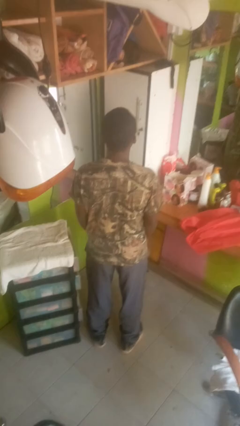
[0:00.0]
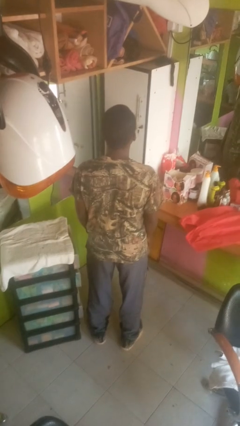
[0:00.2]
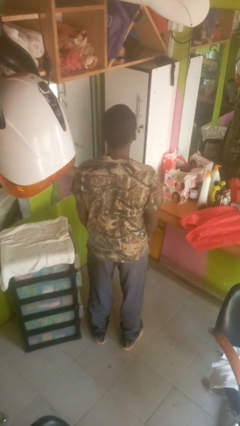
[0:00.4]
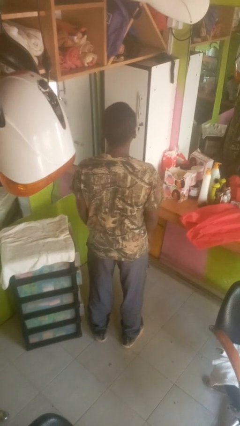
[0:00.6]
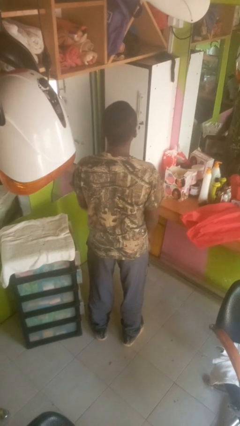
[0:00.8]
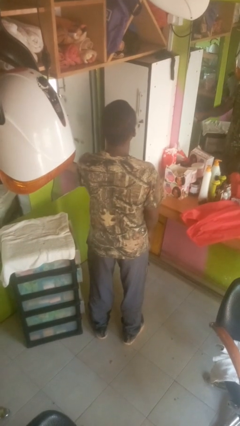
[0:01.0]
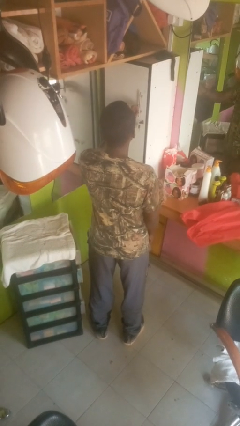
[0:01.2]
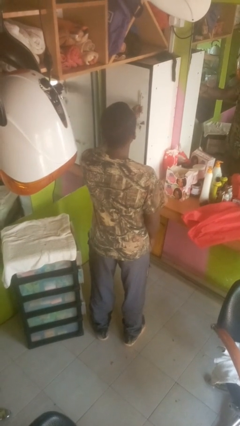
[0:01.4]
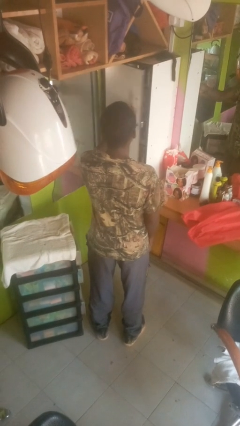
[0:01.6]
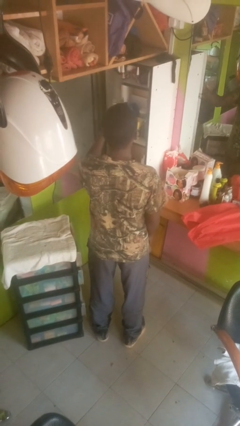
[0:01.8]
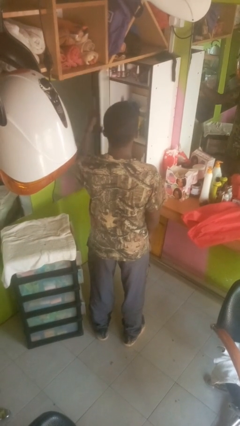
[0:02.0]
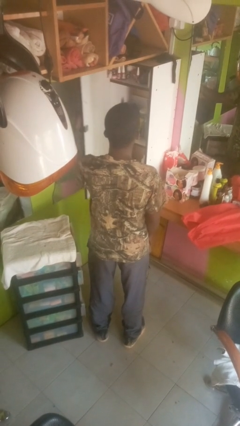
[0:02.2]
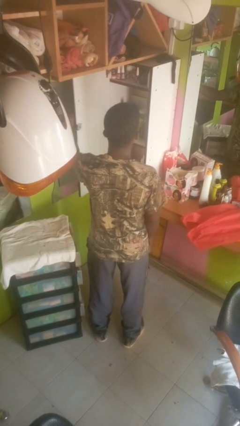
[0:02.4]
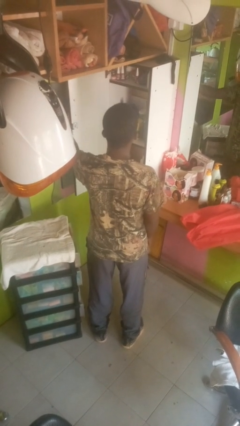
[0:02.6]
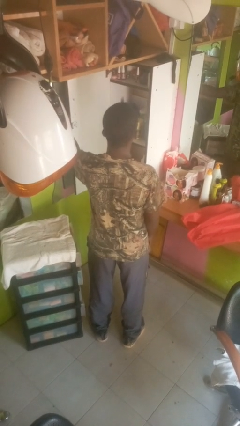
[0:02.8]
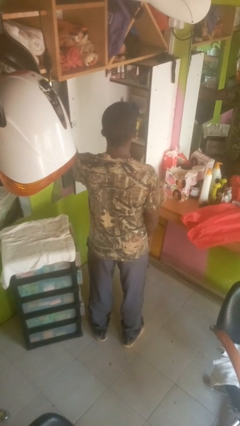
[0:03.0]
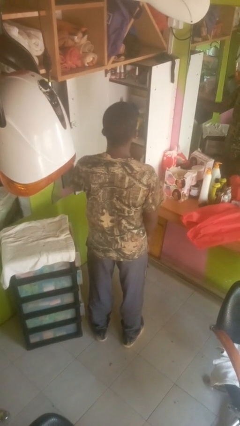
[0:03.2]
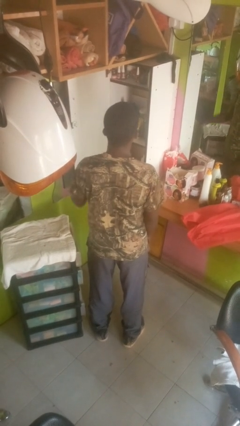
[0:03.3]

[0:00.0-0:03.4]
person opens closet door

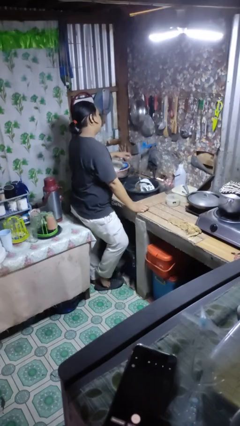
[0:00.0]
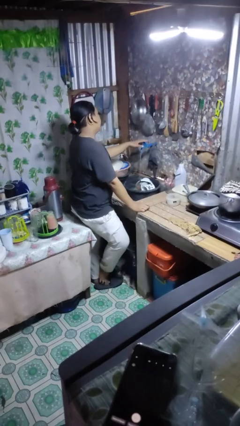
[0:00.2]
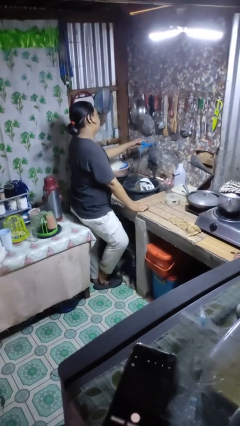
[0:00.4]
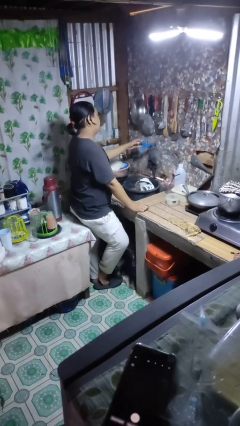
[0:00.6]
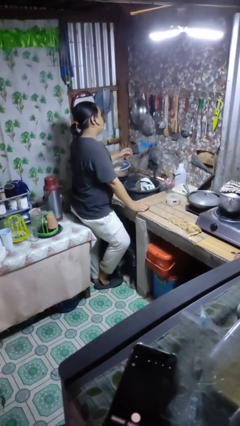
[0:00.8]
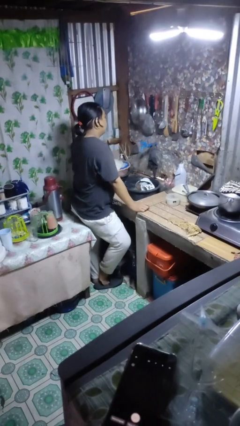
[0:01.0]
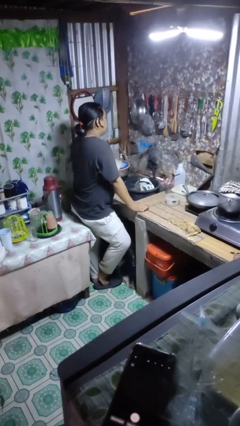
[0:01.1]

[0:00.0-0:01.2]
person turns off faucet

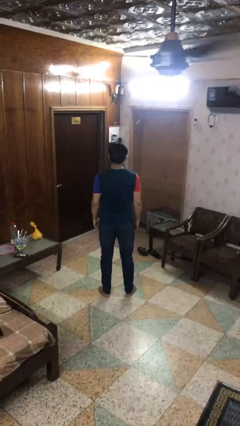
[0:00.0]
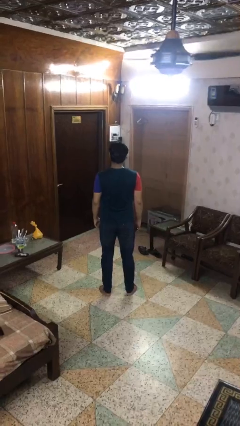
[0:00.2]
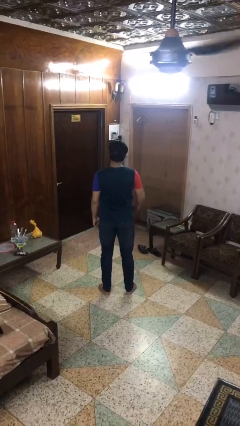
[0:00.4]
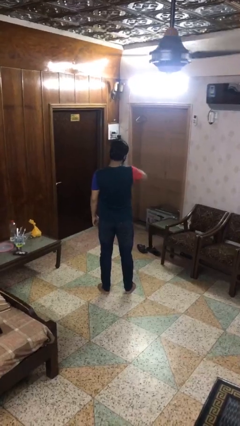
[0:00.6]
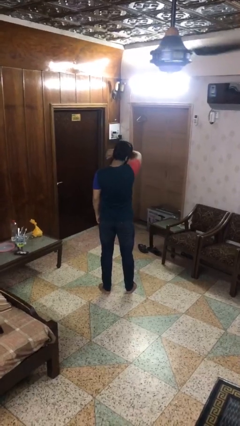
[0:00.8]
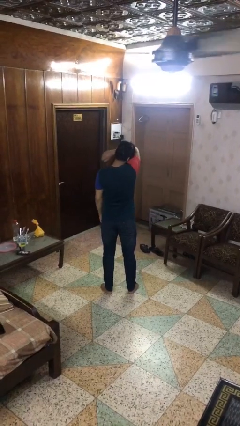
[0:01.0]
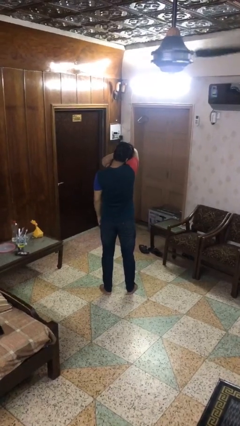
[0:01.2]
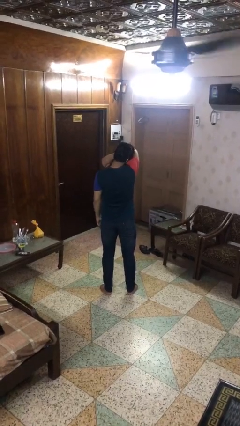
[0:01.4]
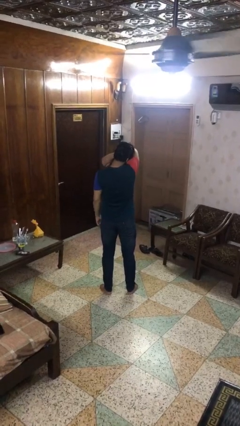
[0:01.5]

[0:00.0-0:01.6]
person sneezes into arm

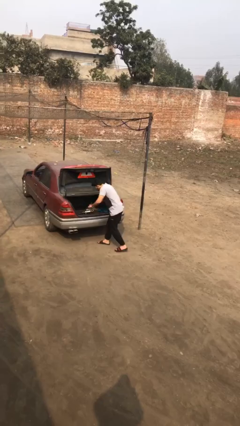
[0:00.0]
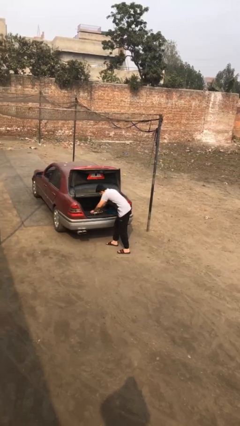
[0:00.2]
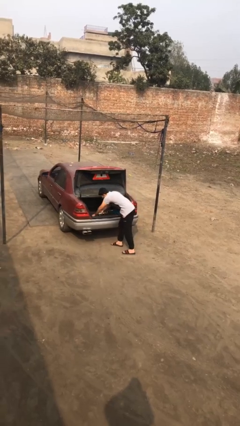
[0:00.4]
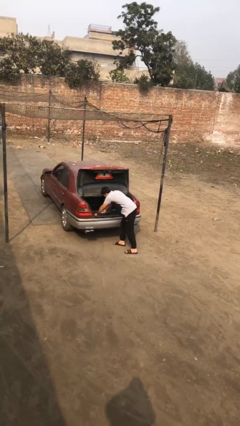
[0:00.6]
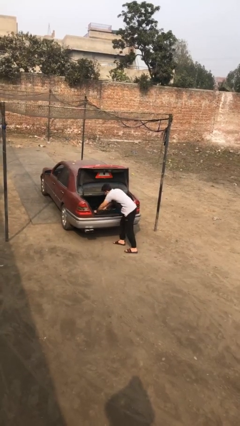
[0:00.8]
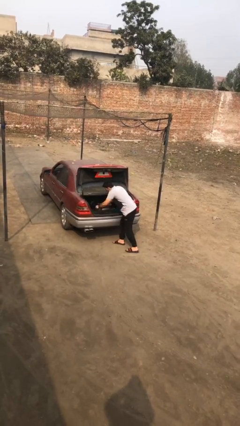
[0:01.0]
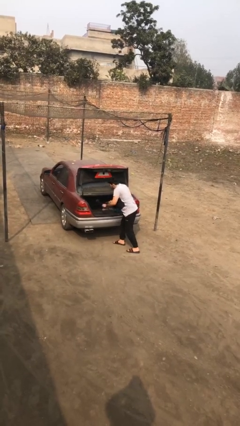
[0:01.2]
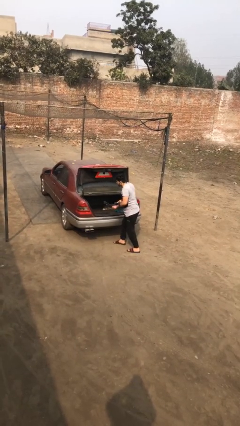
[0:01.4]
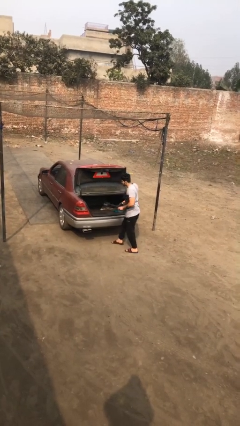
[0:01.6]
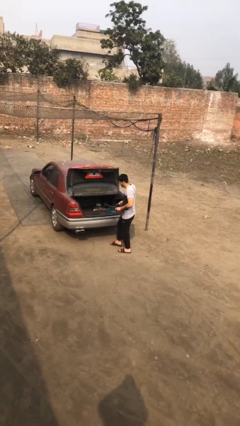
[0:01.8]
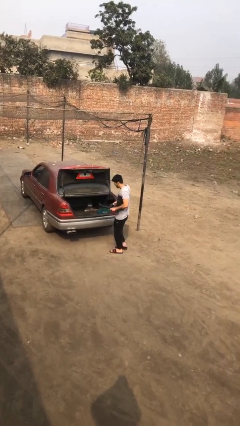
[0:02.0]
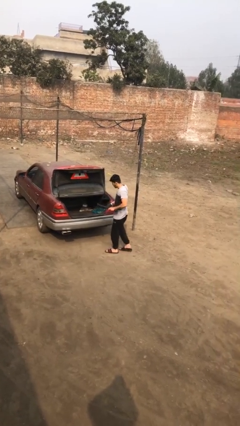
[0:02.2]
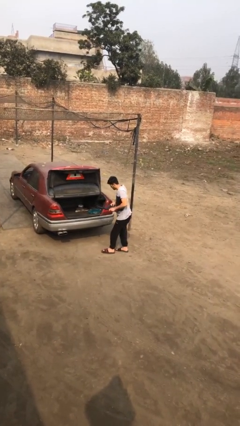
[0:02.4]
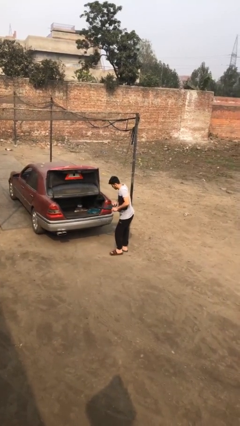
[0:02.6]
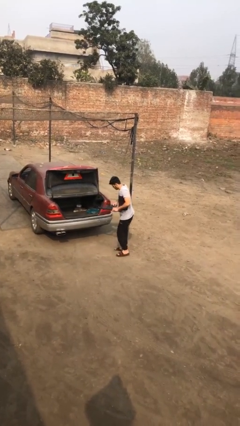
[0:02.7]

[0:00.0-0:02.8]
person unloads car

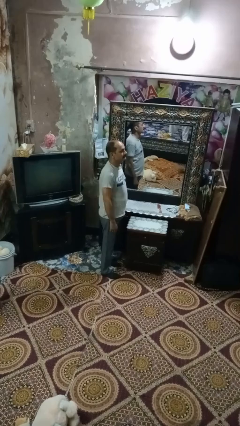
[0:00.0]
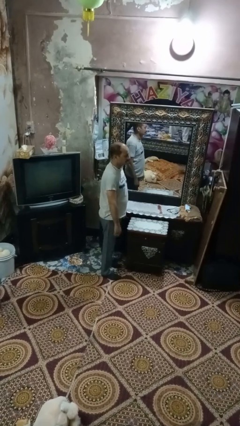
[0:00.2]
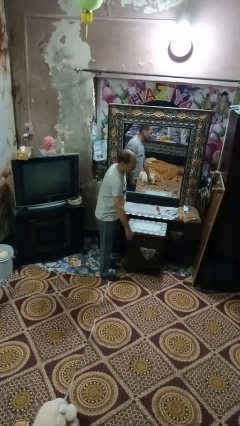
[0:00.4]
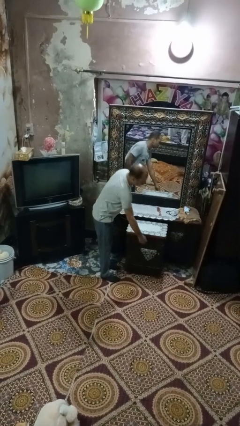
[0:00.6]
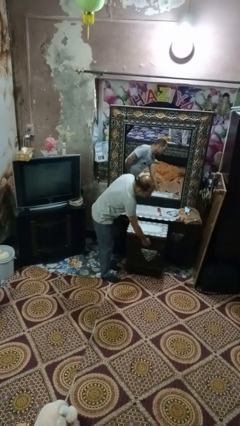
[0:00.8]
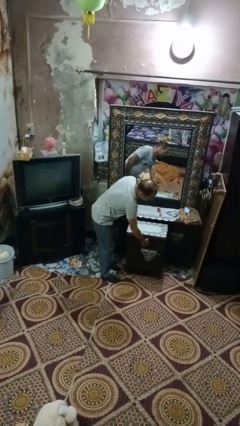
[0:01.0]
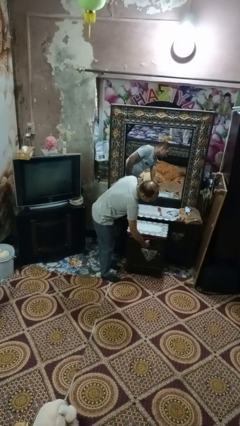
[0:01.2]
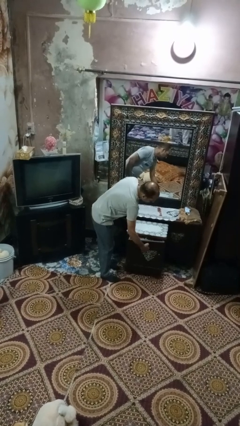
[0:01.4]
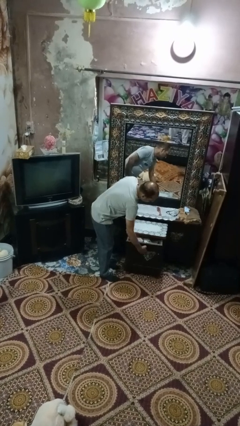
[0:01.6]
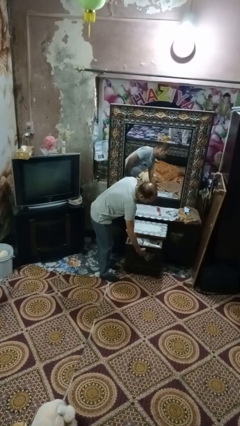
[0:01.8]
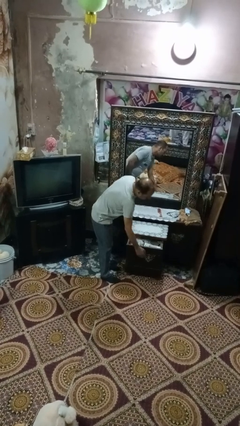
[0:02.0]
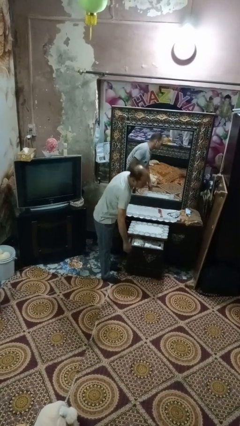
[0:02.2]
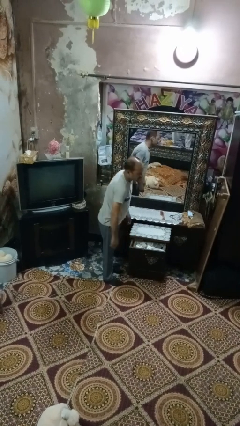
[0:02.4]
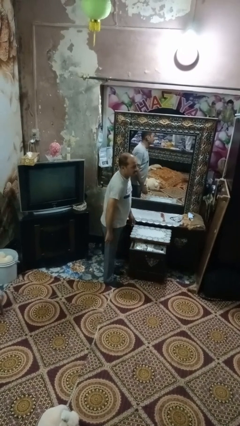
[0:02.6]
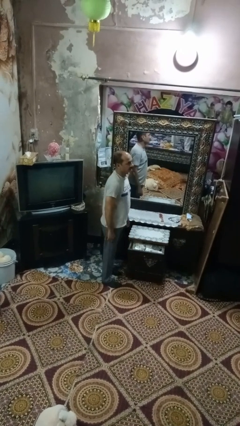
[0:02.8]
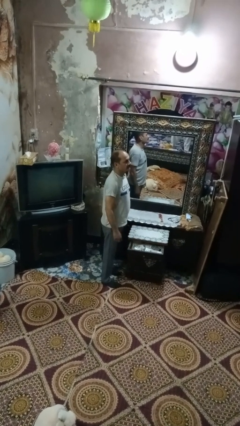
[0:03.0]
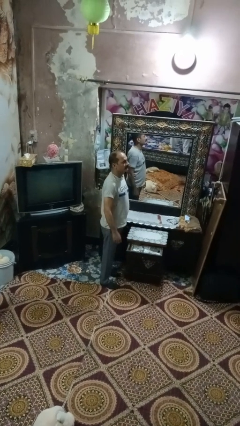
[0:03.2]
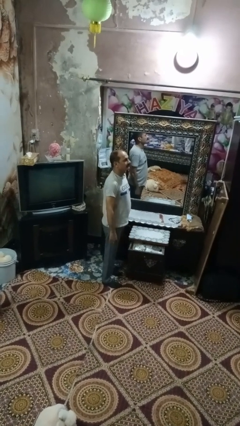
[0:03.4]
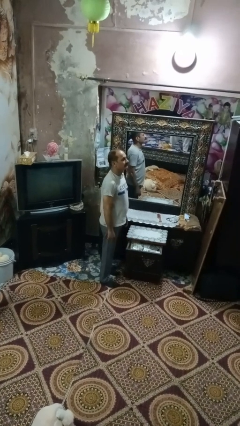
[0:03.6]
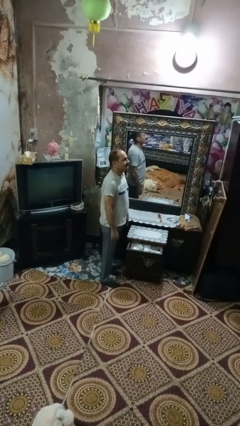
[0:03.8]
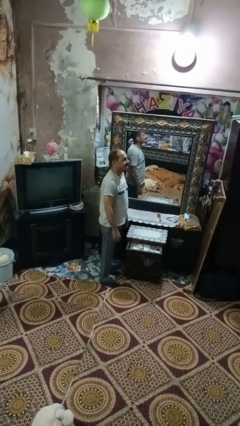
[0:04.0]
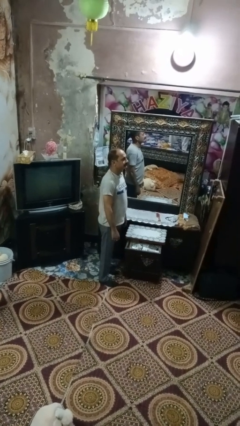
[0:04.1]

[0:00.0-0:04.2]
person opens dresser drawer

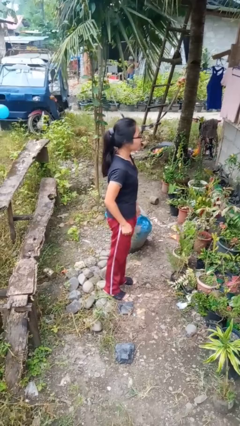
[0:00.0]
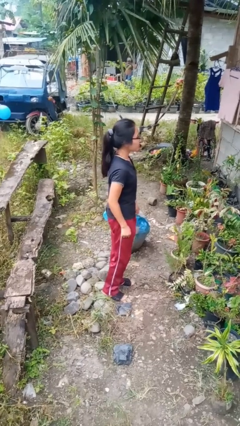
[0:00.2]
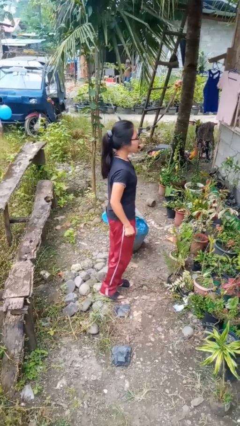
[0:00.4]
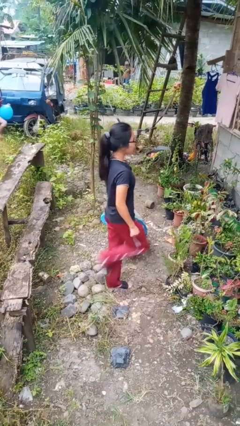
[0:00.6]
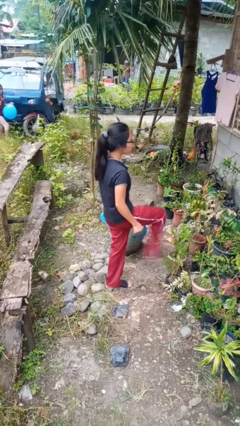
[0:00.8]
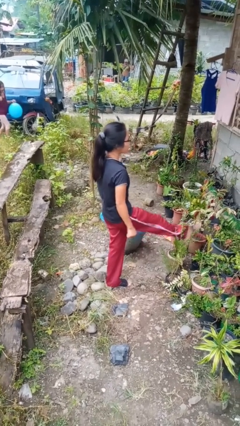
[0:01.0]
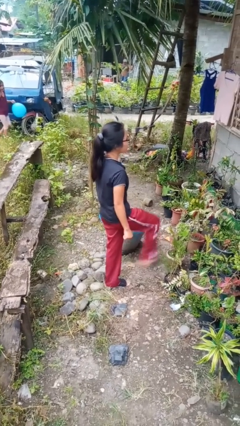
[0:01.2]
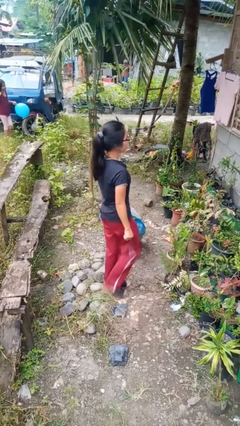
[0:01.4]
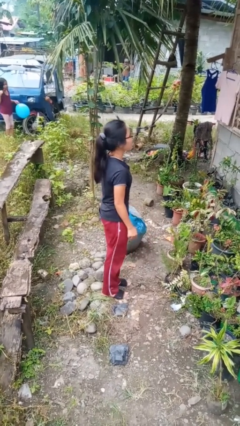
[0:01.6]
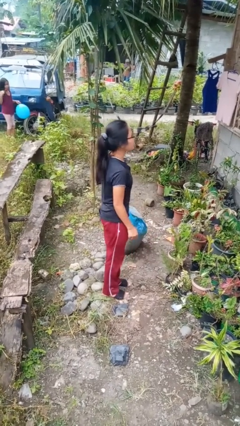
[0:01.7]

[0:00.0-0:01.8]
person karate kicks

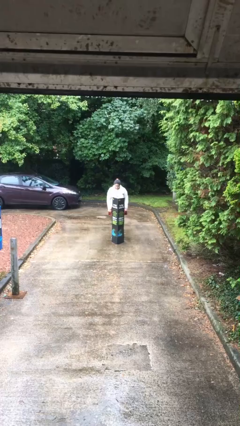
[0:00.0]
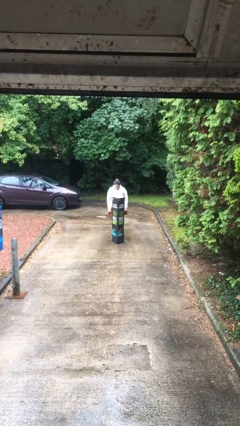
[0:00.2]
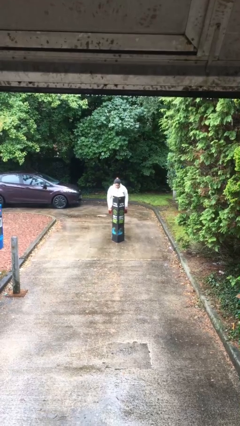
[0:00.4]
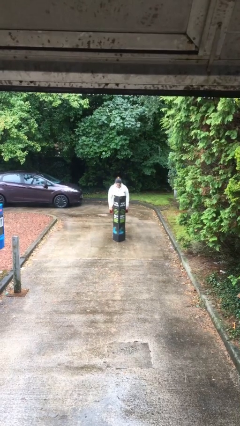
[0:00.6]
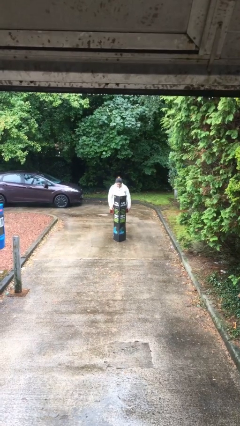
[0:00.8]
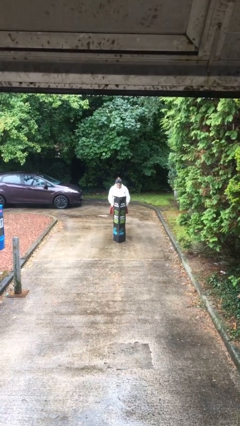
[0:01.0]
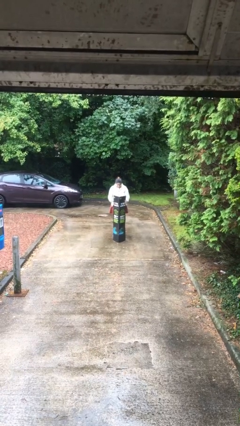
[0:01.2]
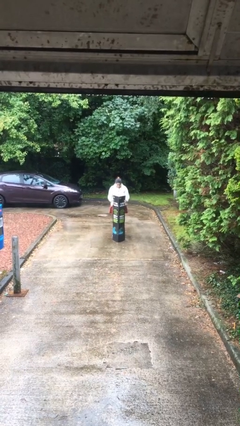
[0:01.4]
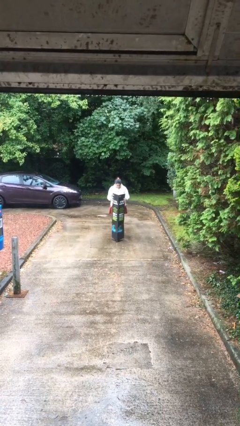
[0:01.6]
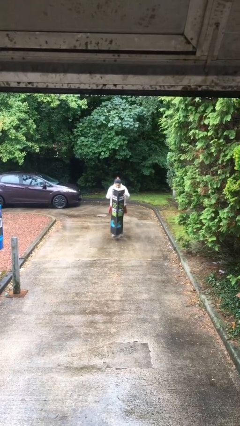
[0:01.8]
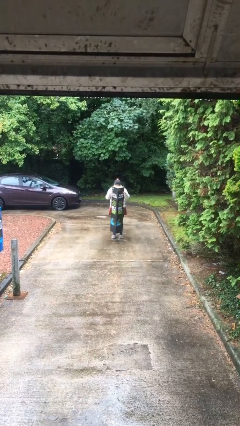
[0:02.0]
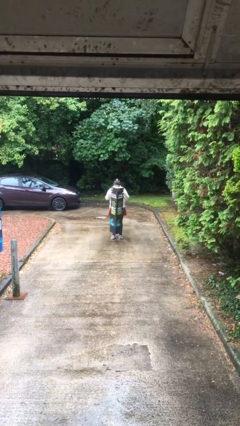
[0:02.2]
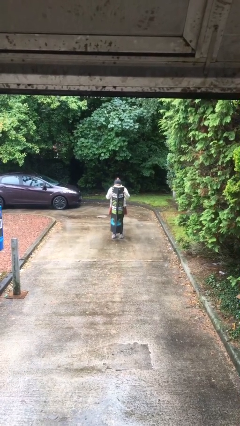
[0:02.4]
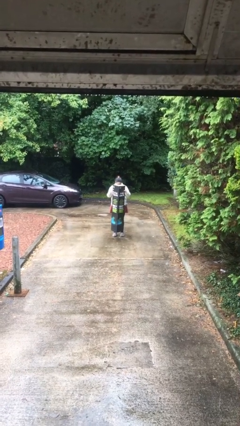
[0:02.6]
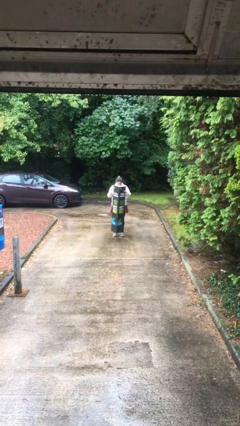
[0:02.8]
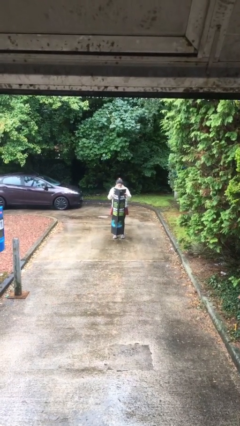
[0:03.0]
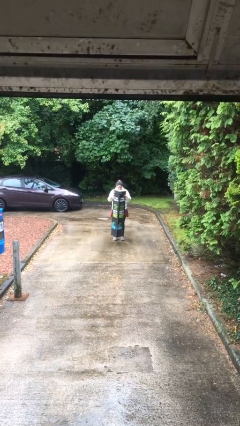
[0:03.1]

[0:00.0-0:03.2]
person picks up object from floor
